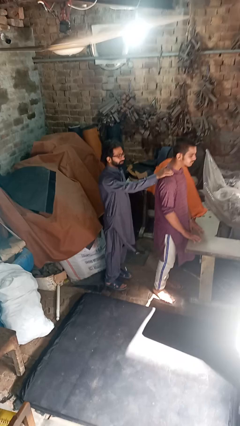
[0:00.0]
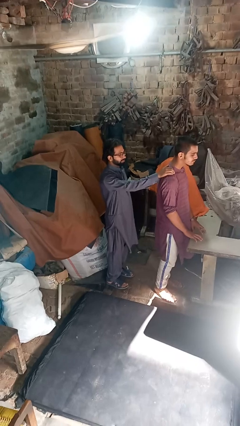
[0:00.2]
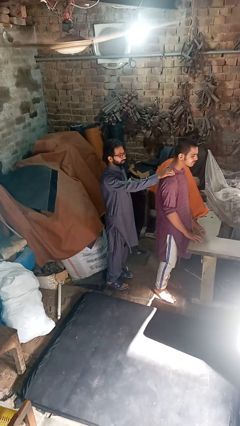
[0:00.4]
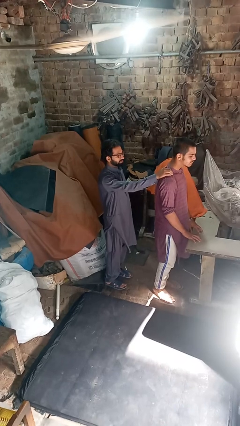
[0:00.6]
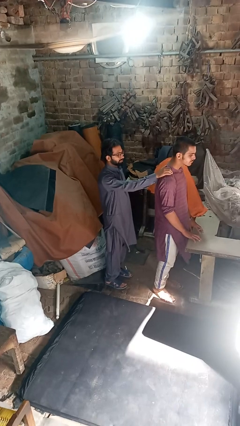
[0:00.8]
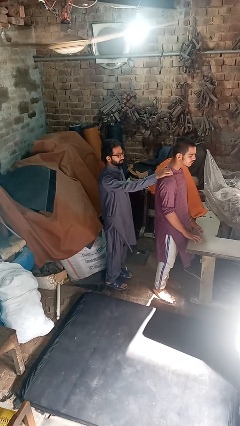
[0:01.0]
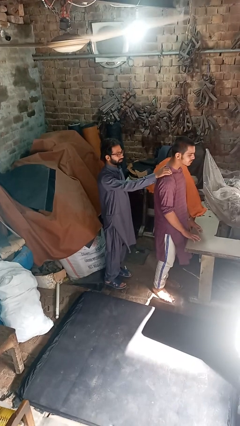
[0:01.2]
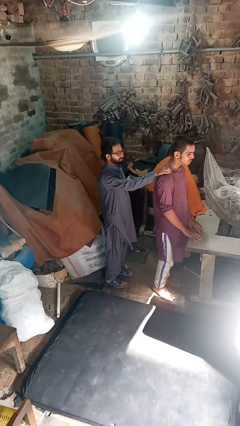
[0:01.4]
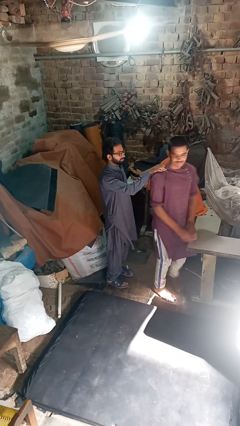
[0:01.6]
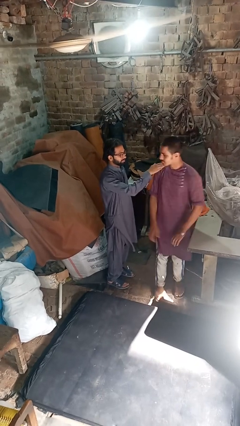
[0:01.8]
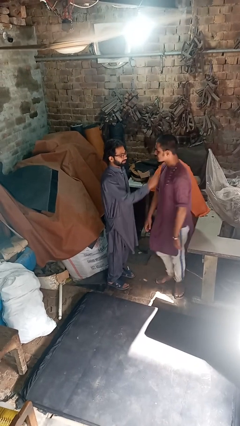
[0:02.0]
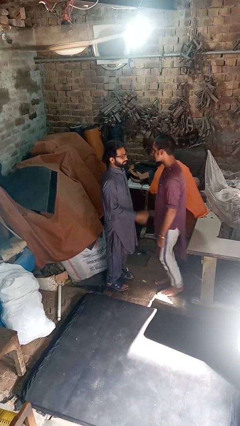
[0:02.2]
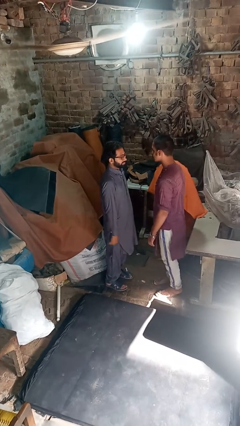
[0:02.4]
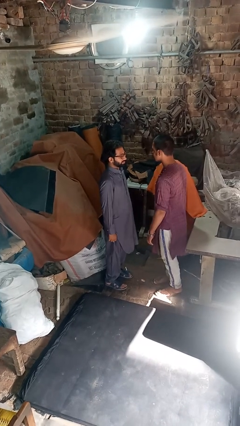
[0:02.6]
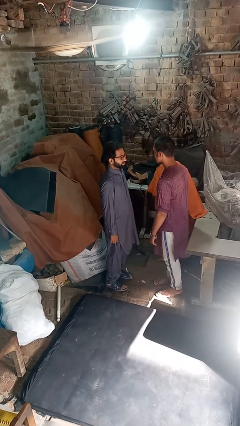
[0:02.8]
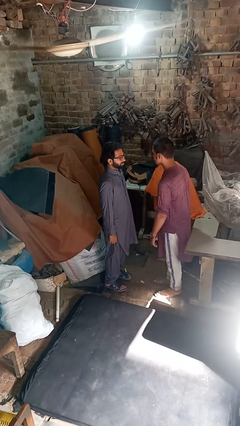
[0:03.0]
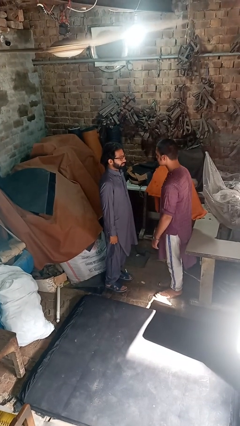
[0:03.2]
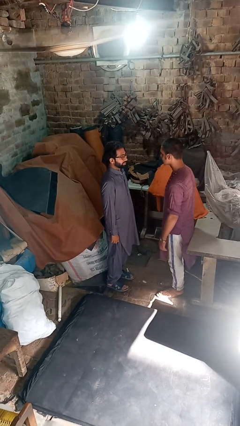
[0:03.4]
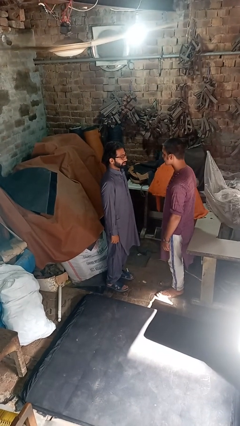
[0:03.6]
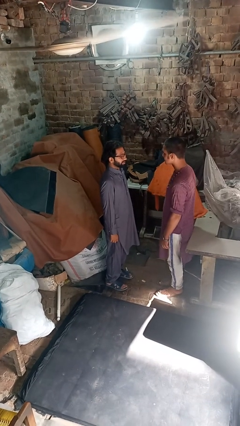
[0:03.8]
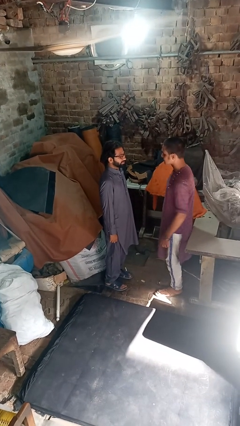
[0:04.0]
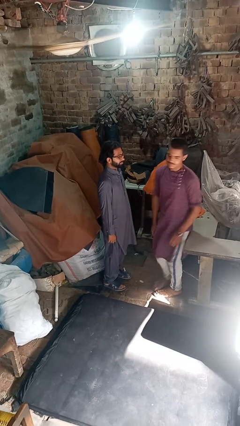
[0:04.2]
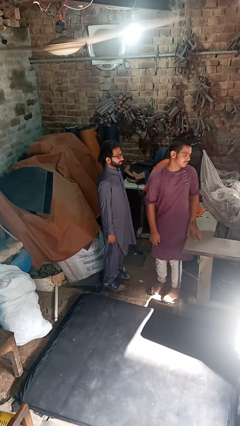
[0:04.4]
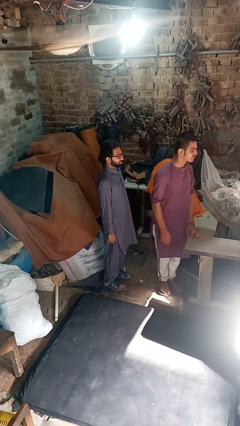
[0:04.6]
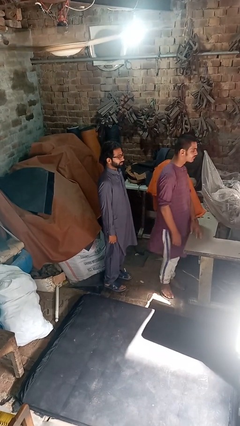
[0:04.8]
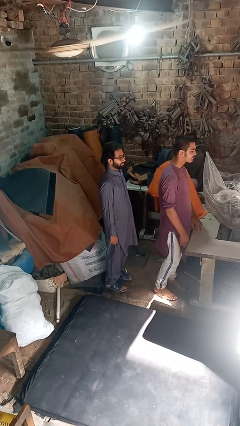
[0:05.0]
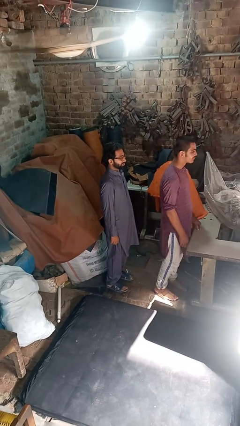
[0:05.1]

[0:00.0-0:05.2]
person spins person around

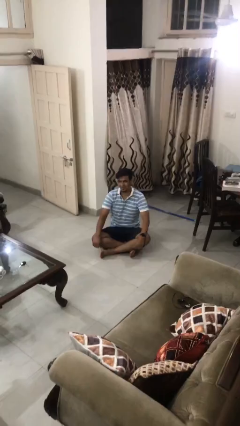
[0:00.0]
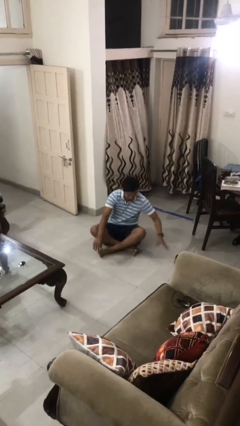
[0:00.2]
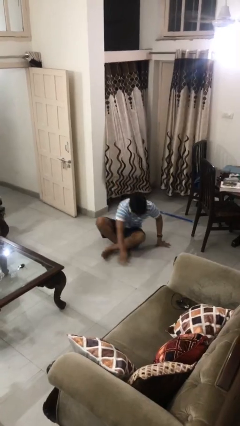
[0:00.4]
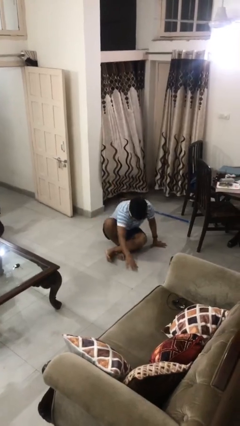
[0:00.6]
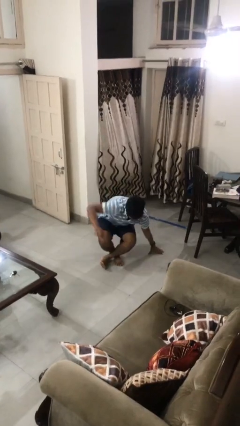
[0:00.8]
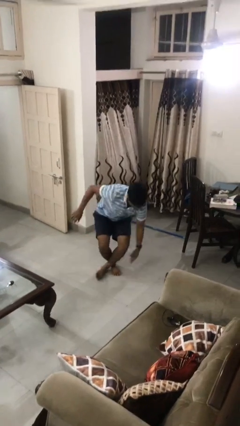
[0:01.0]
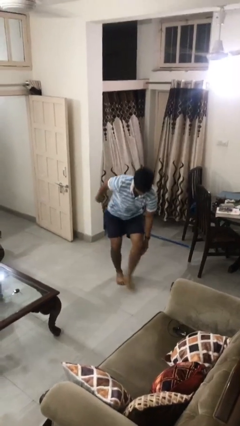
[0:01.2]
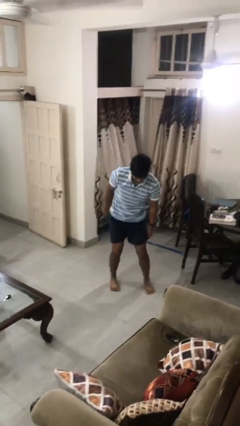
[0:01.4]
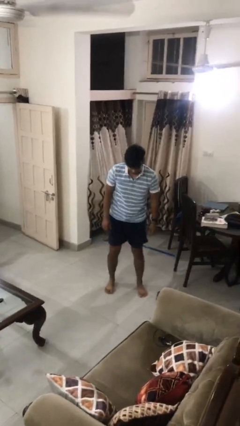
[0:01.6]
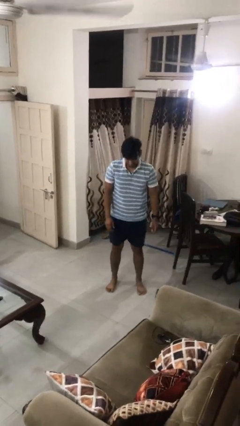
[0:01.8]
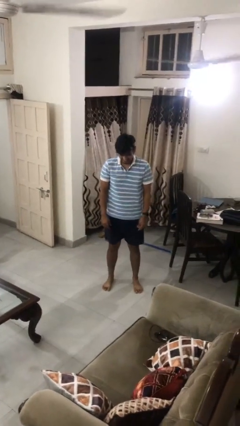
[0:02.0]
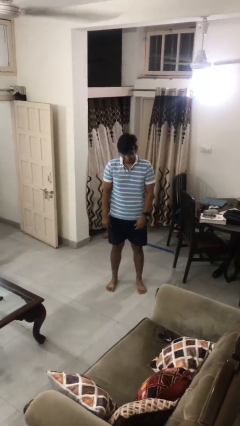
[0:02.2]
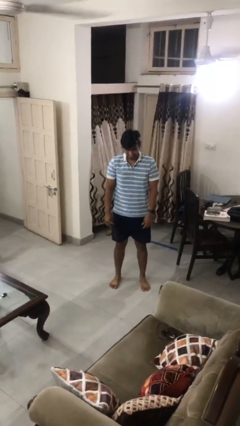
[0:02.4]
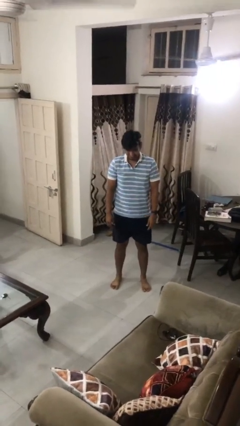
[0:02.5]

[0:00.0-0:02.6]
person stands up from floor

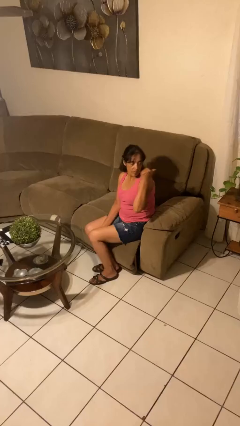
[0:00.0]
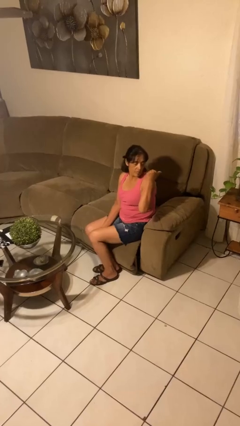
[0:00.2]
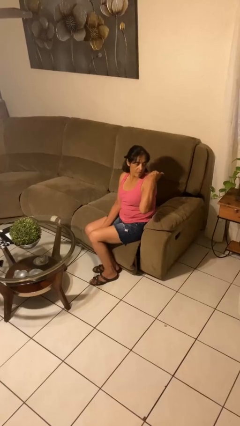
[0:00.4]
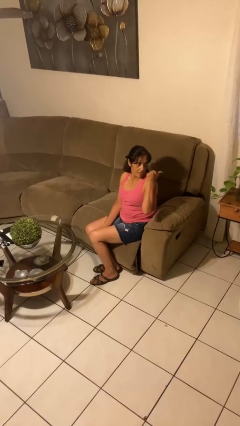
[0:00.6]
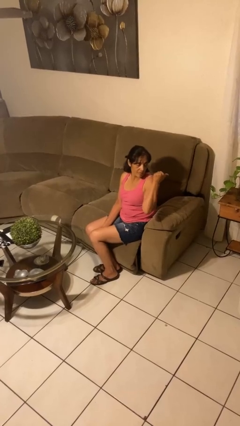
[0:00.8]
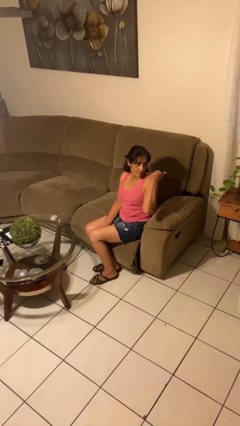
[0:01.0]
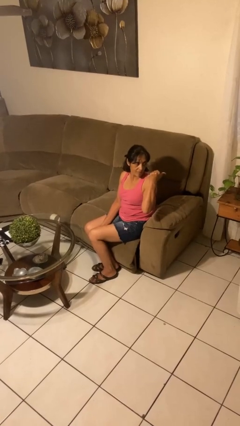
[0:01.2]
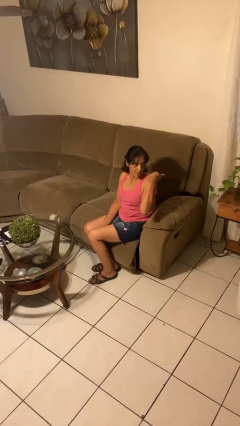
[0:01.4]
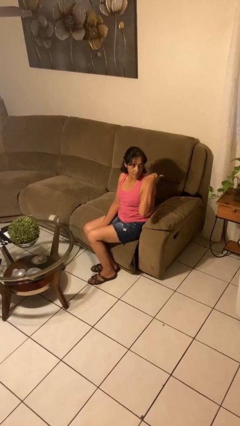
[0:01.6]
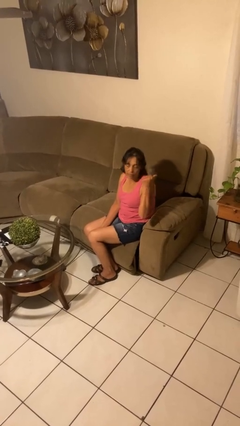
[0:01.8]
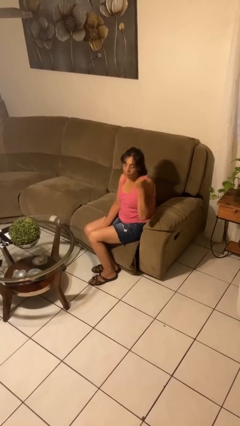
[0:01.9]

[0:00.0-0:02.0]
person gestures behind me

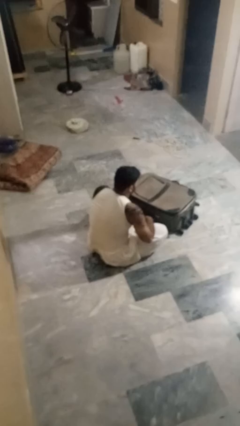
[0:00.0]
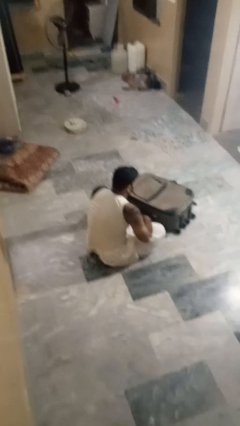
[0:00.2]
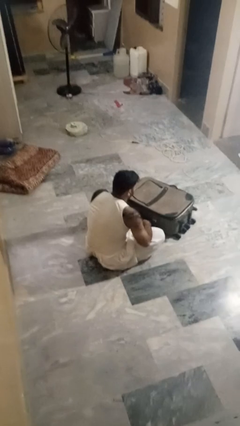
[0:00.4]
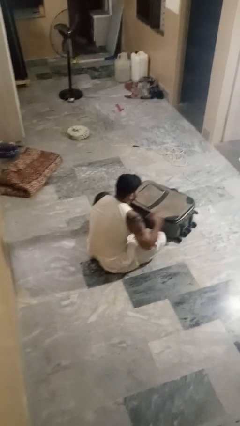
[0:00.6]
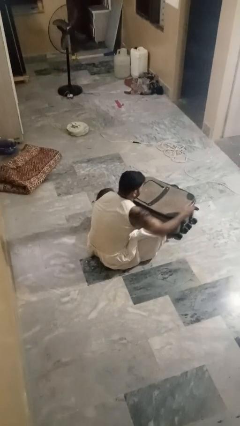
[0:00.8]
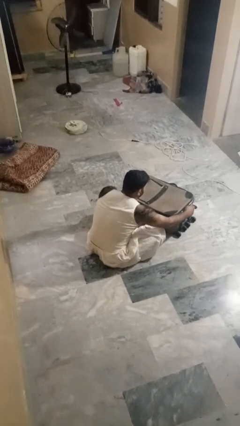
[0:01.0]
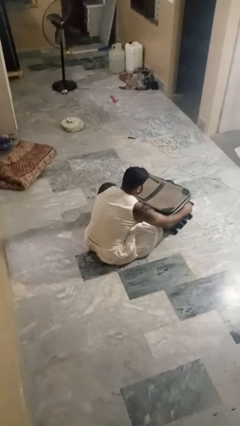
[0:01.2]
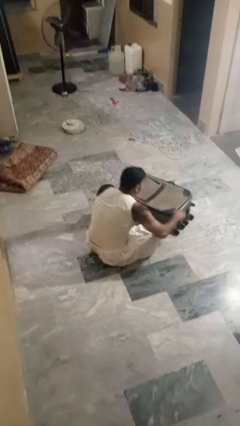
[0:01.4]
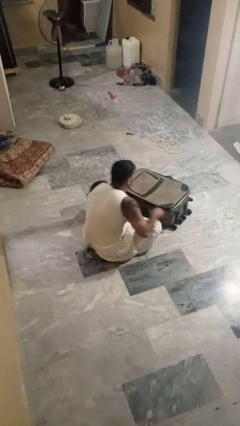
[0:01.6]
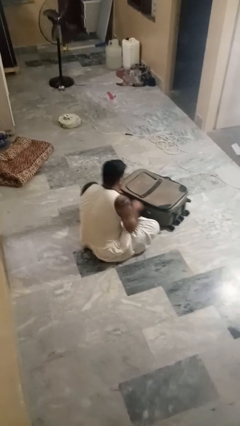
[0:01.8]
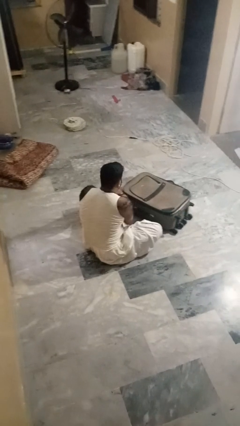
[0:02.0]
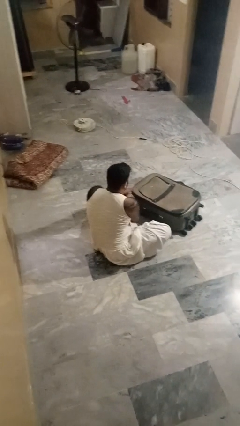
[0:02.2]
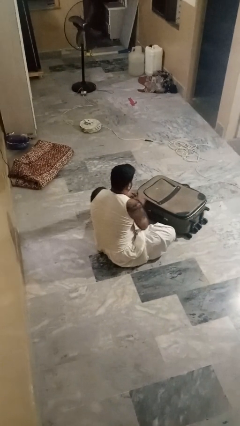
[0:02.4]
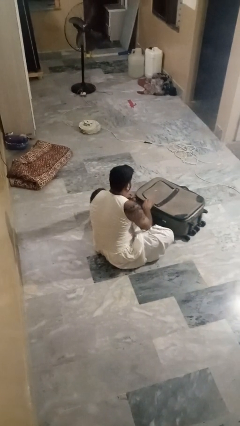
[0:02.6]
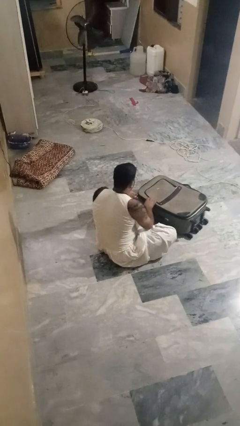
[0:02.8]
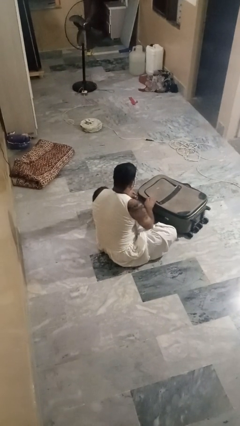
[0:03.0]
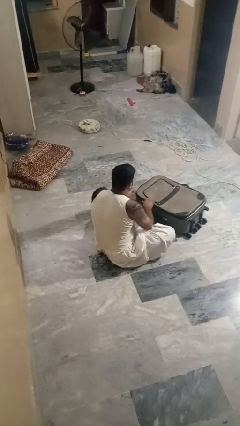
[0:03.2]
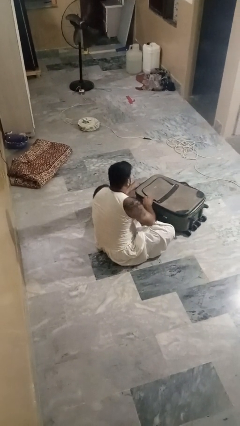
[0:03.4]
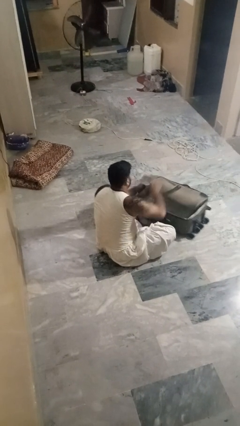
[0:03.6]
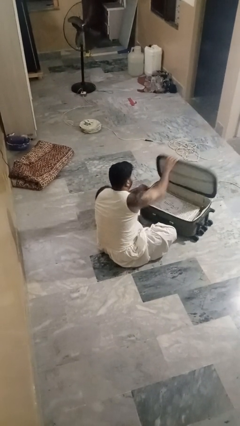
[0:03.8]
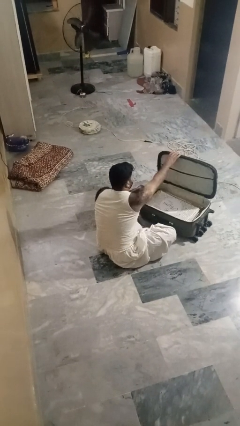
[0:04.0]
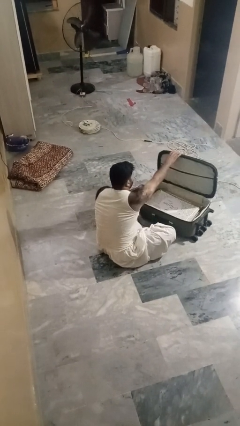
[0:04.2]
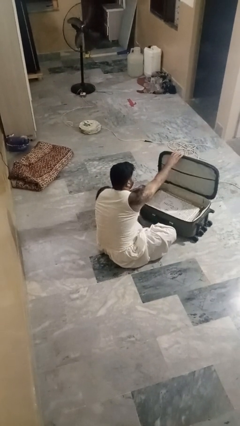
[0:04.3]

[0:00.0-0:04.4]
person opens suitcase

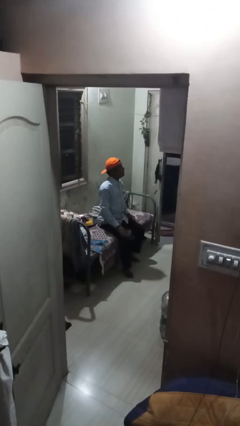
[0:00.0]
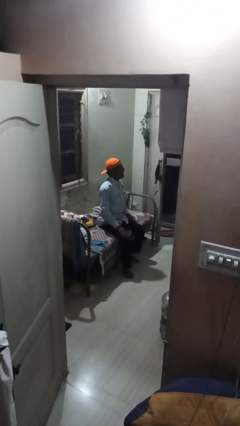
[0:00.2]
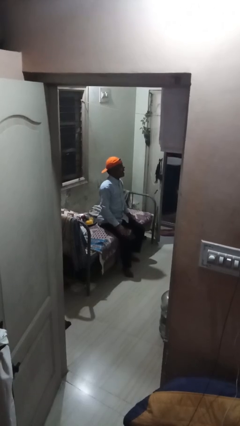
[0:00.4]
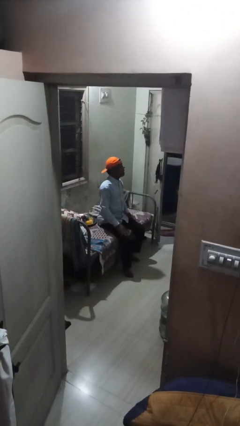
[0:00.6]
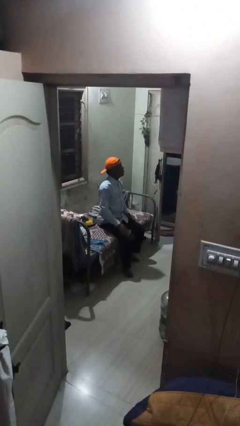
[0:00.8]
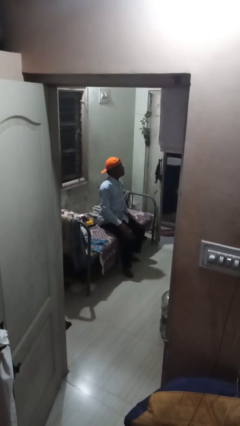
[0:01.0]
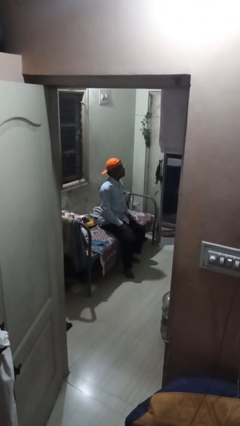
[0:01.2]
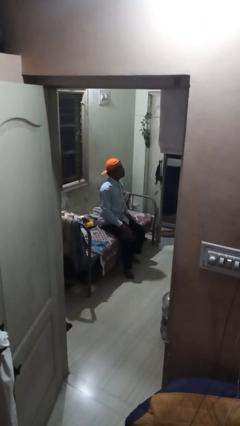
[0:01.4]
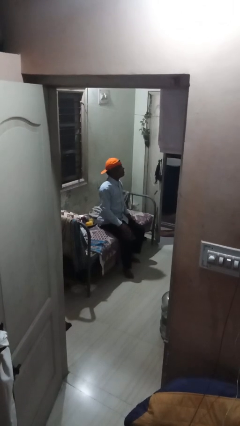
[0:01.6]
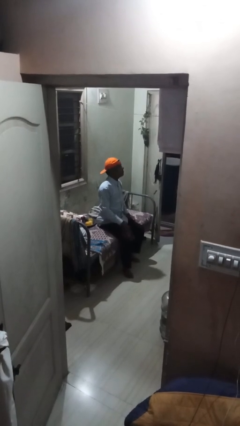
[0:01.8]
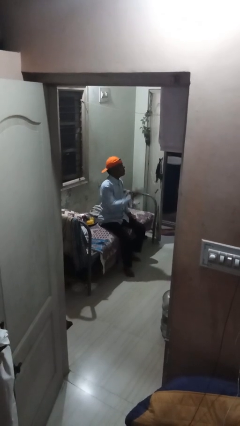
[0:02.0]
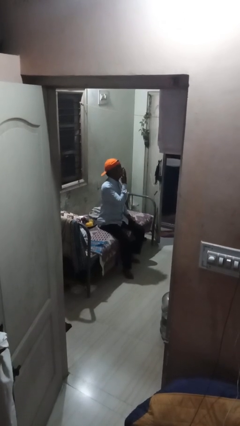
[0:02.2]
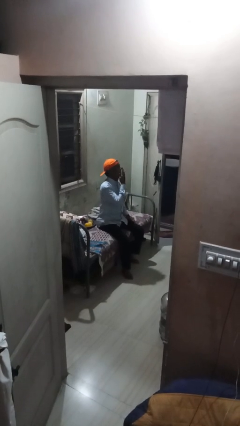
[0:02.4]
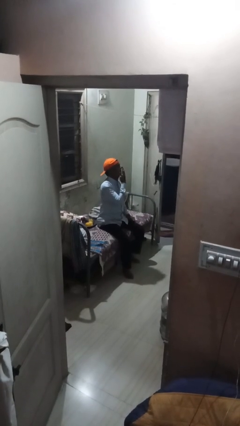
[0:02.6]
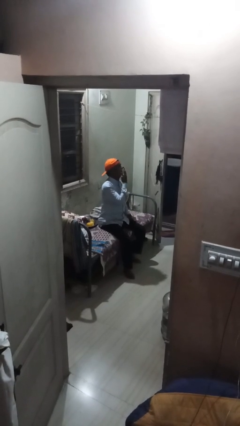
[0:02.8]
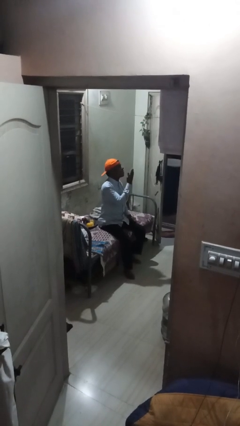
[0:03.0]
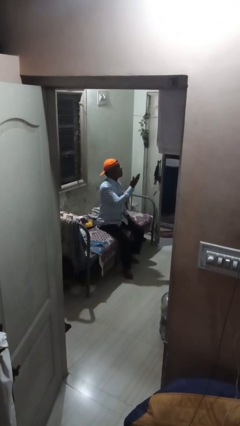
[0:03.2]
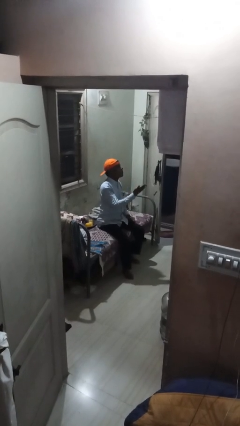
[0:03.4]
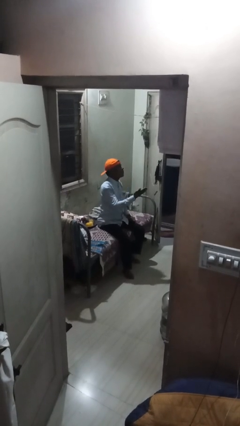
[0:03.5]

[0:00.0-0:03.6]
person gestures blow kiss
